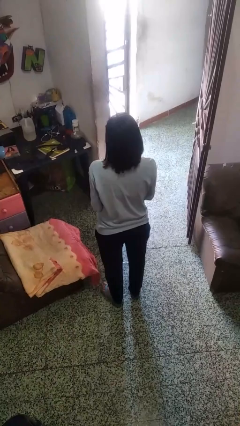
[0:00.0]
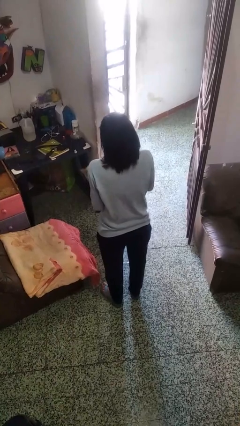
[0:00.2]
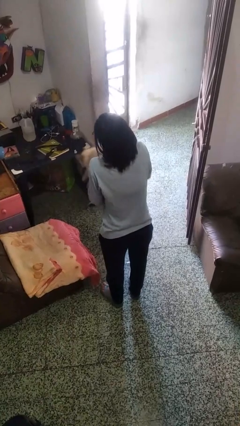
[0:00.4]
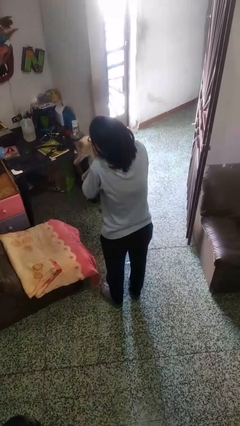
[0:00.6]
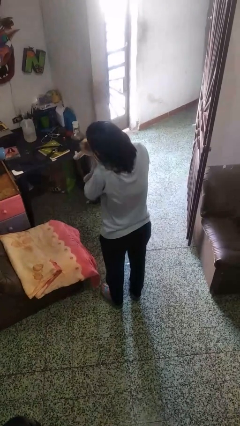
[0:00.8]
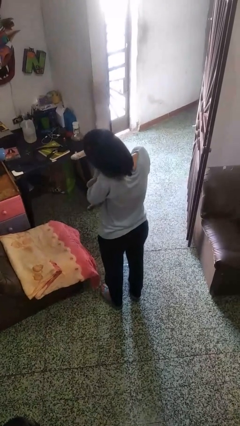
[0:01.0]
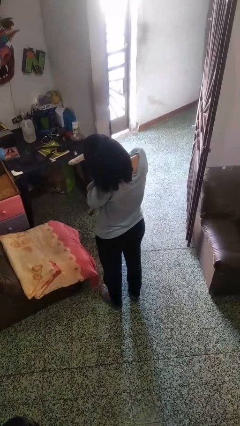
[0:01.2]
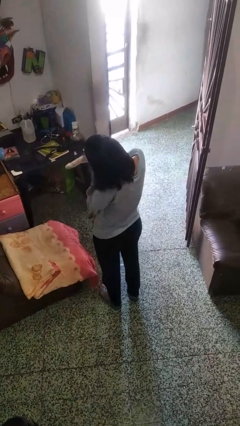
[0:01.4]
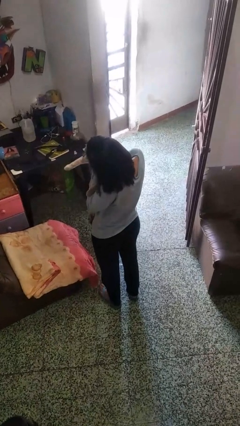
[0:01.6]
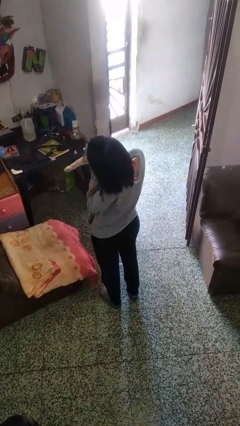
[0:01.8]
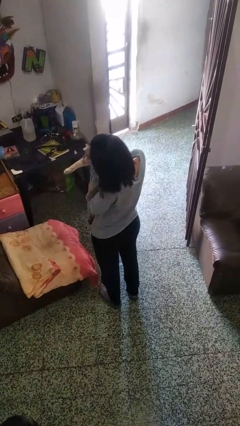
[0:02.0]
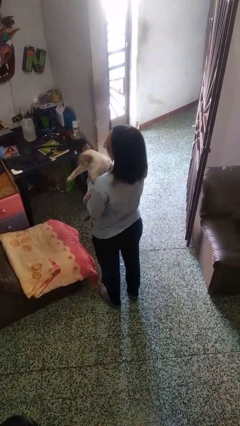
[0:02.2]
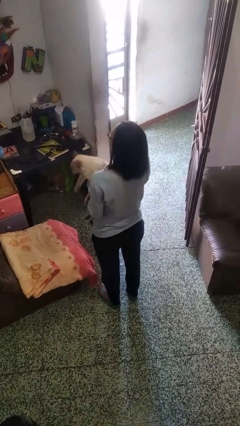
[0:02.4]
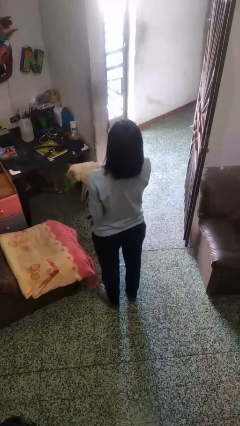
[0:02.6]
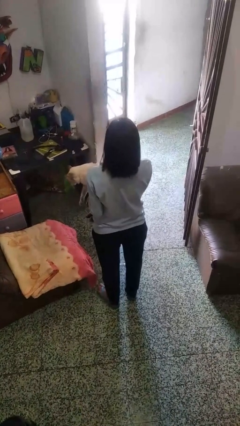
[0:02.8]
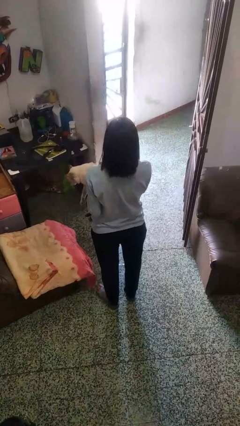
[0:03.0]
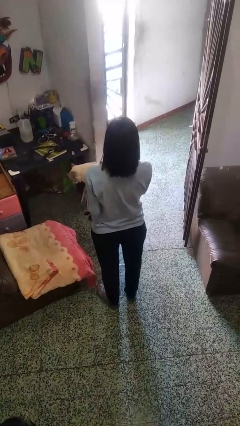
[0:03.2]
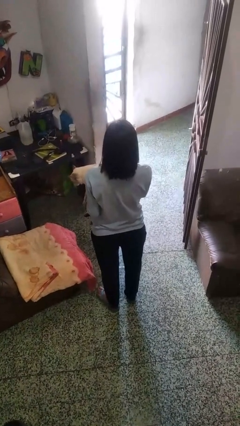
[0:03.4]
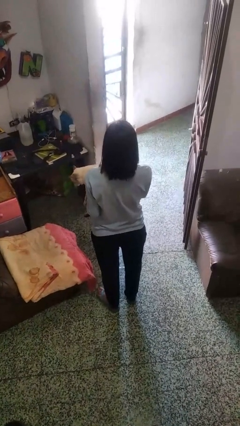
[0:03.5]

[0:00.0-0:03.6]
person hugs cat

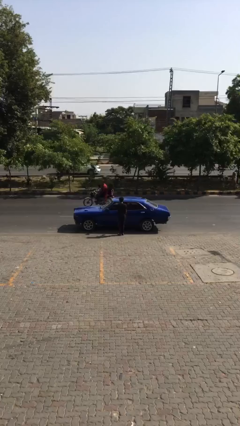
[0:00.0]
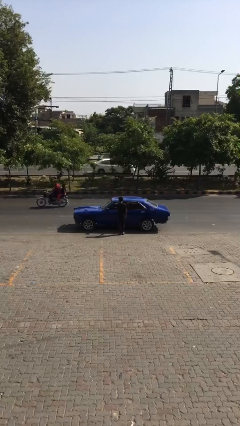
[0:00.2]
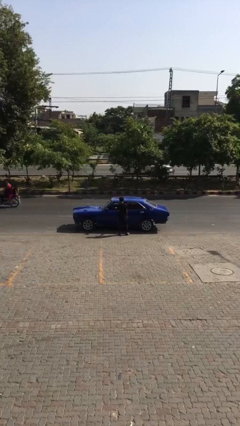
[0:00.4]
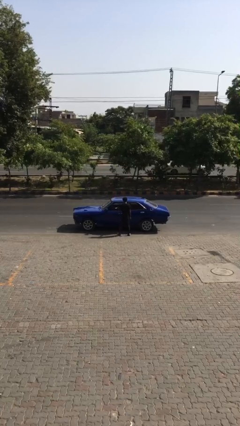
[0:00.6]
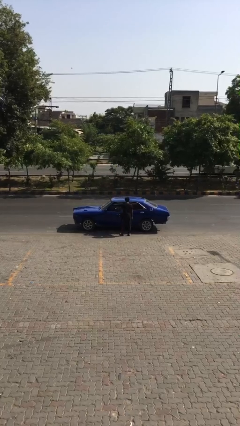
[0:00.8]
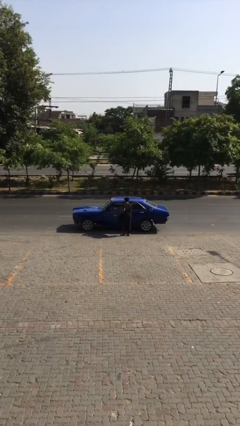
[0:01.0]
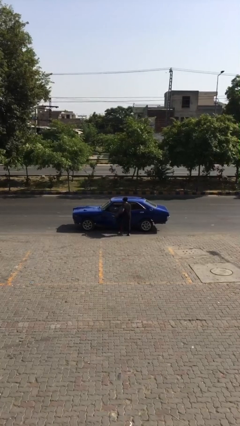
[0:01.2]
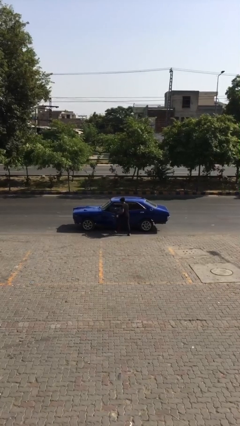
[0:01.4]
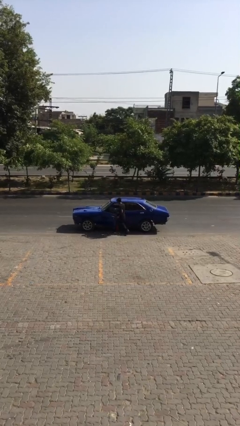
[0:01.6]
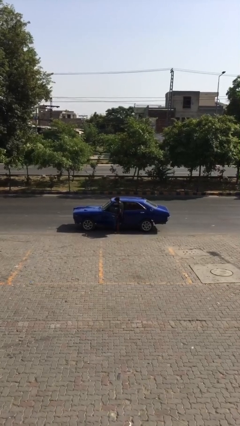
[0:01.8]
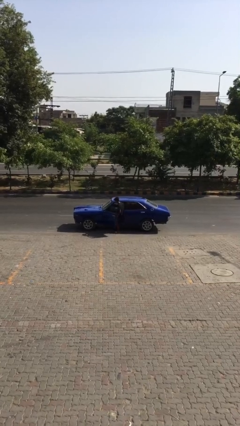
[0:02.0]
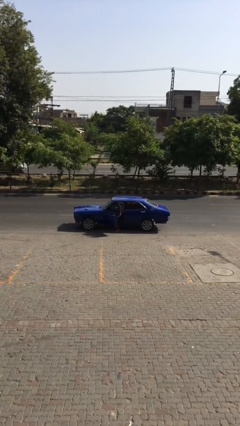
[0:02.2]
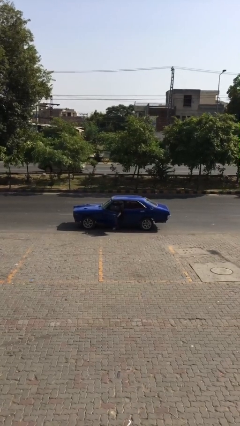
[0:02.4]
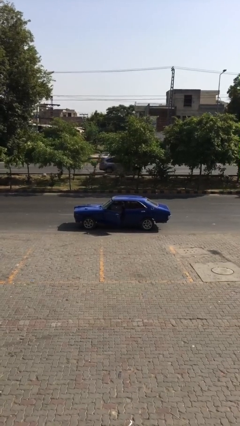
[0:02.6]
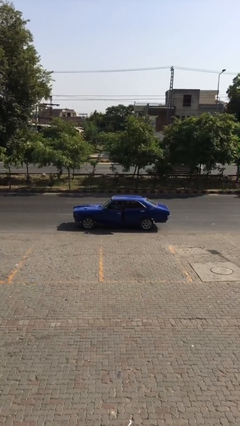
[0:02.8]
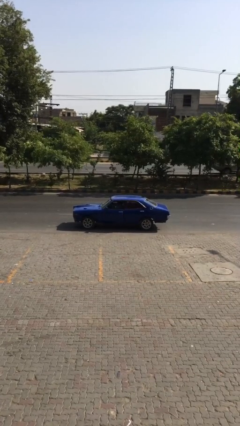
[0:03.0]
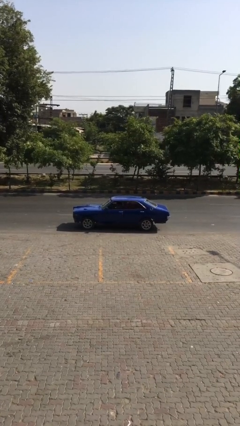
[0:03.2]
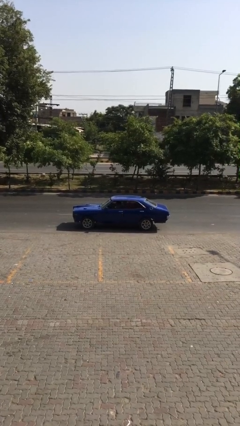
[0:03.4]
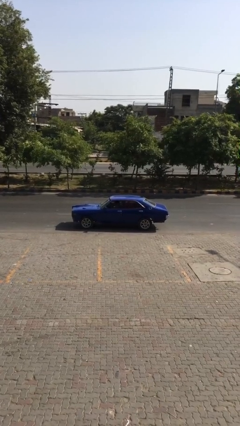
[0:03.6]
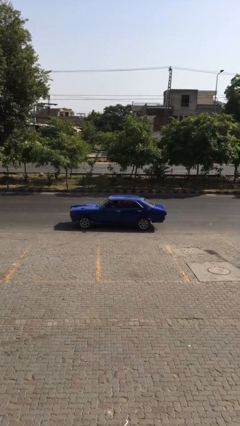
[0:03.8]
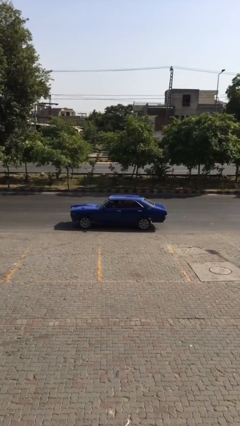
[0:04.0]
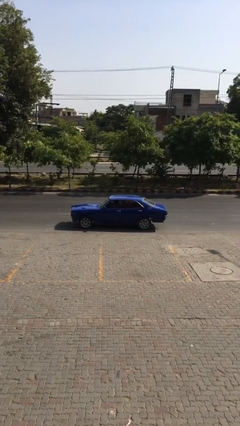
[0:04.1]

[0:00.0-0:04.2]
car picks up person

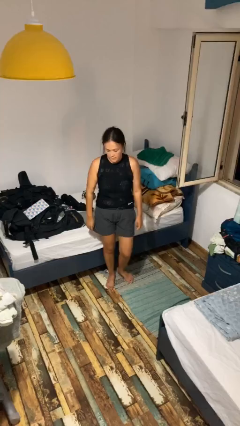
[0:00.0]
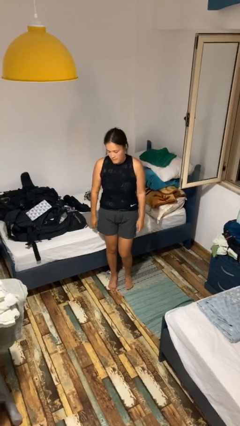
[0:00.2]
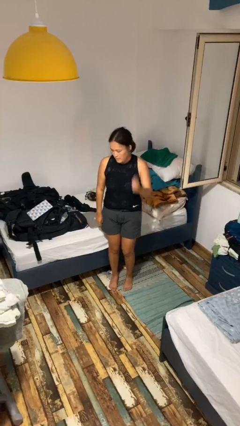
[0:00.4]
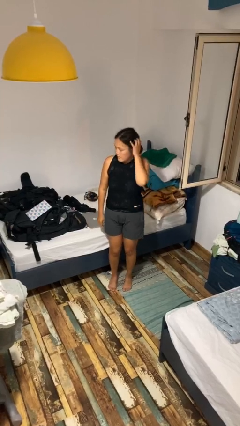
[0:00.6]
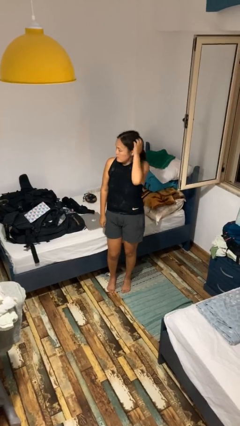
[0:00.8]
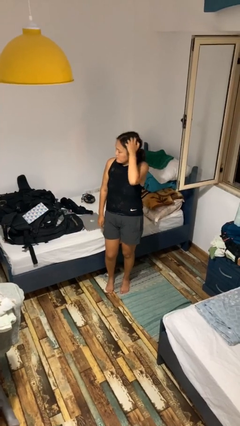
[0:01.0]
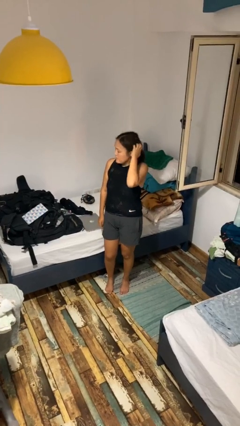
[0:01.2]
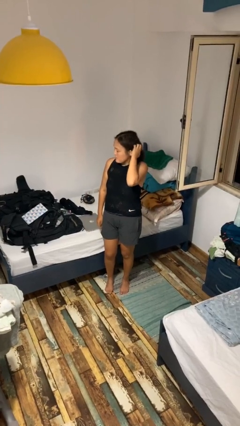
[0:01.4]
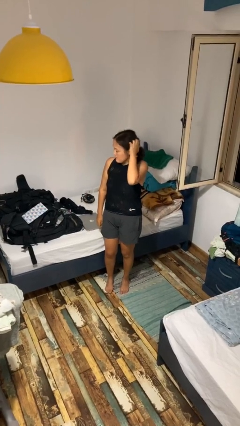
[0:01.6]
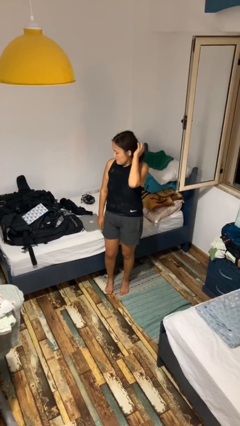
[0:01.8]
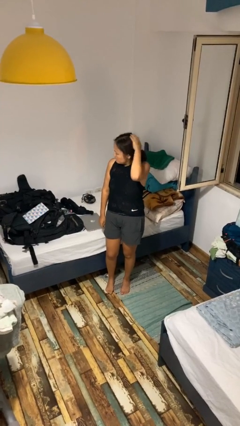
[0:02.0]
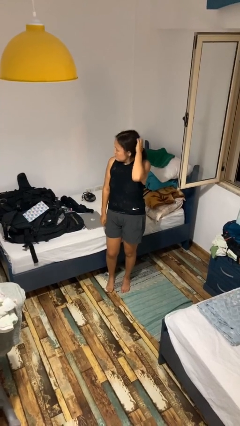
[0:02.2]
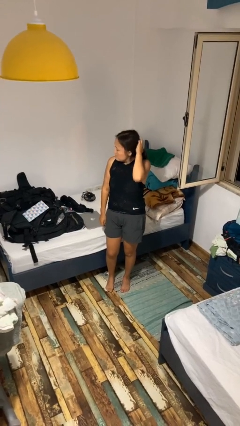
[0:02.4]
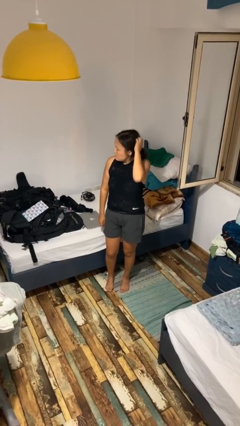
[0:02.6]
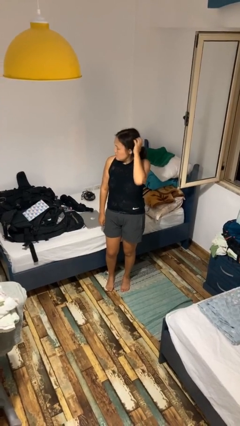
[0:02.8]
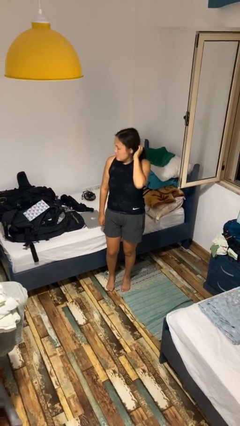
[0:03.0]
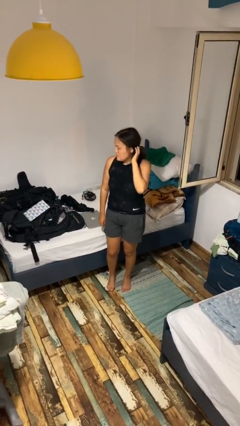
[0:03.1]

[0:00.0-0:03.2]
person scratches face

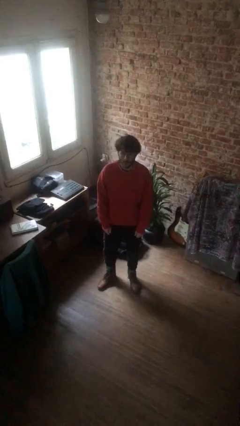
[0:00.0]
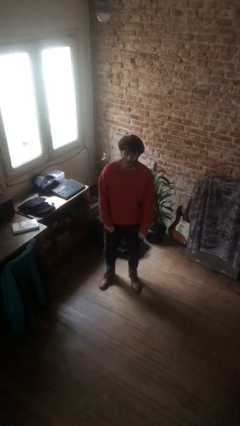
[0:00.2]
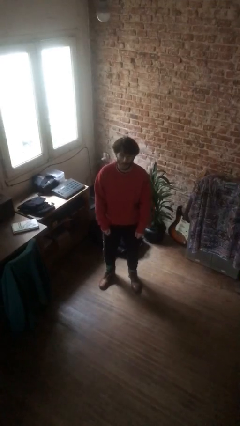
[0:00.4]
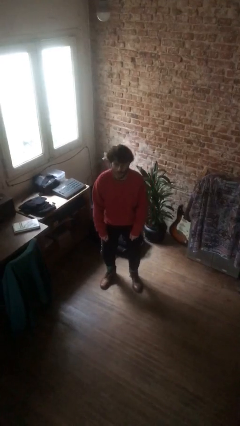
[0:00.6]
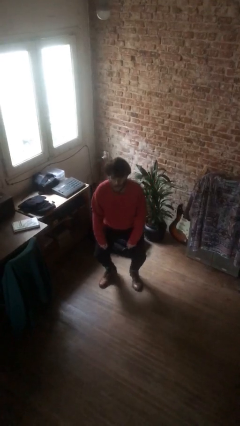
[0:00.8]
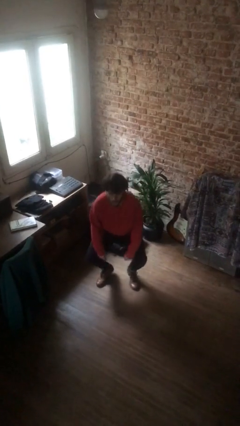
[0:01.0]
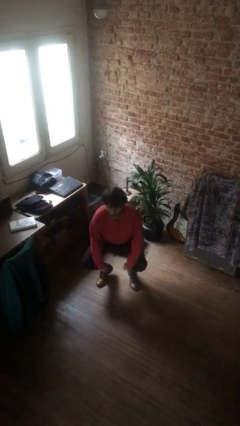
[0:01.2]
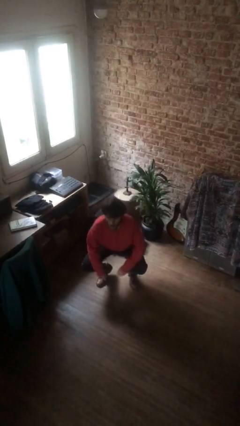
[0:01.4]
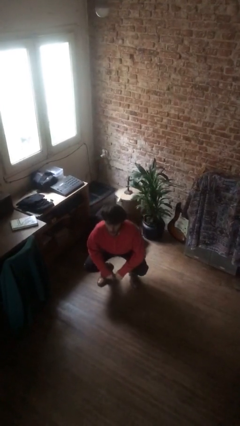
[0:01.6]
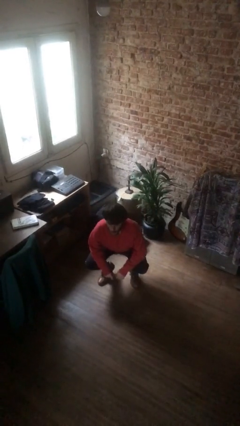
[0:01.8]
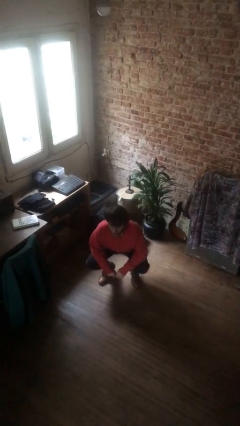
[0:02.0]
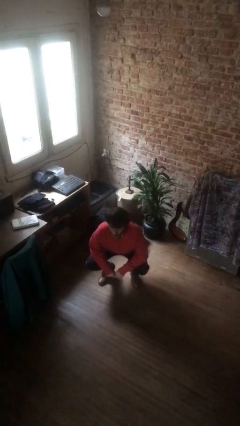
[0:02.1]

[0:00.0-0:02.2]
person squats

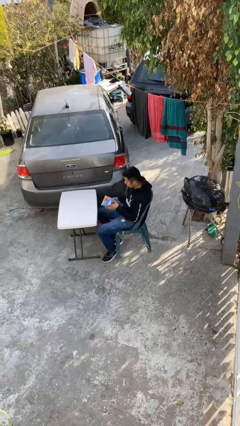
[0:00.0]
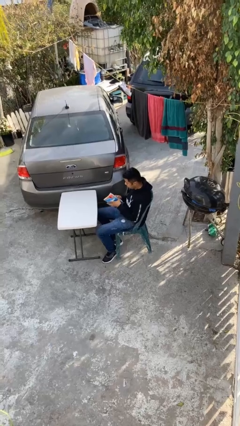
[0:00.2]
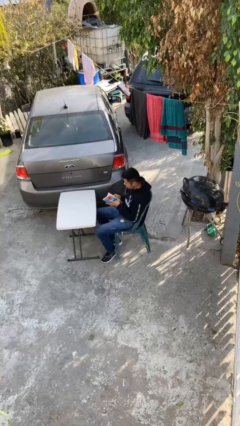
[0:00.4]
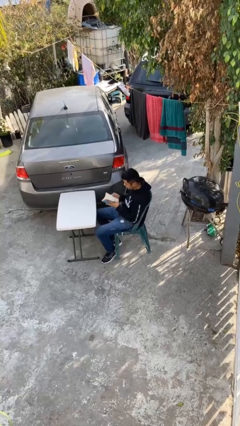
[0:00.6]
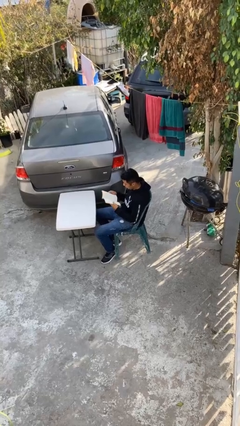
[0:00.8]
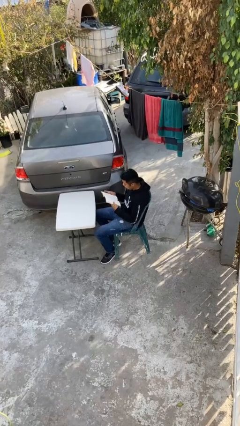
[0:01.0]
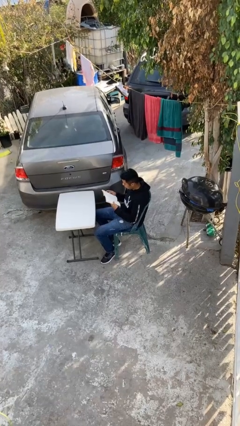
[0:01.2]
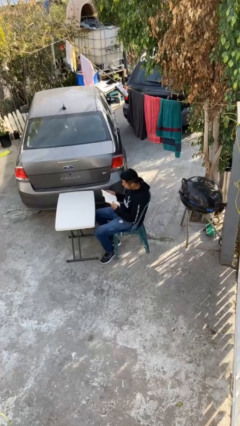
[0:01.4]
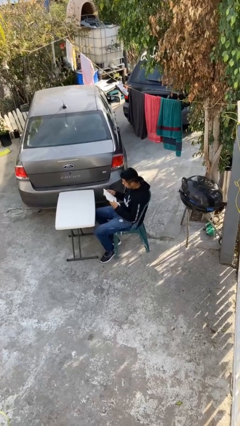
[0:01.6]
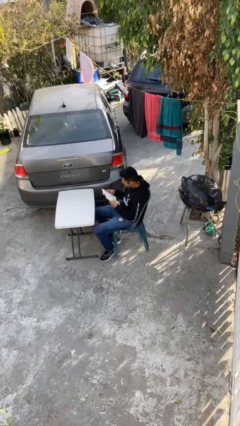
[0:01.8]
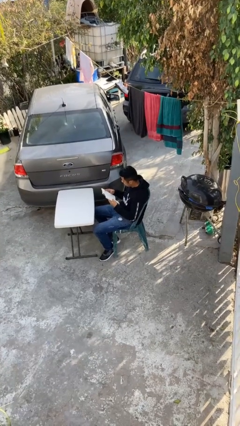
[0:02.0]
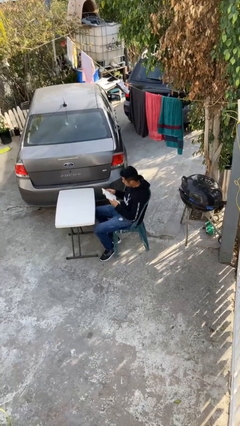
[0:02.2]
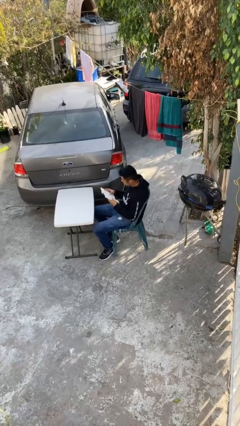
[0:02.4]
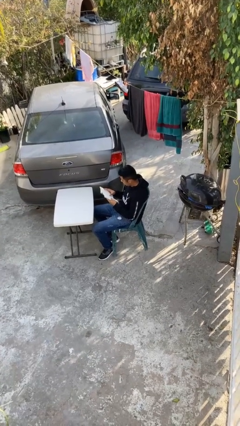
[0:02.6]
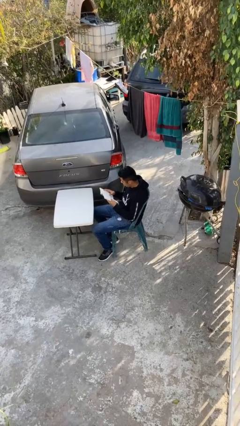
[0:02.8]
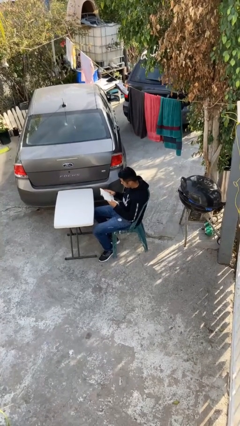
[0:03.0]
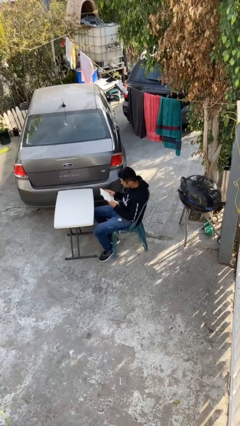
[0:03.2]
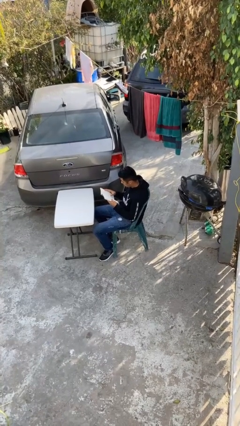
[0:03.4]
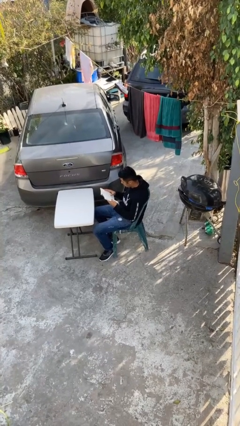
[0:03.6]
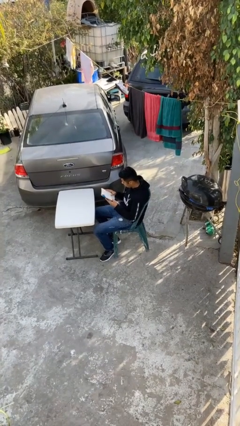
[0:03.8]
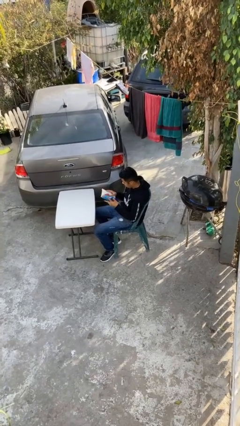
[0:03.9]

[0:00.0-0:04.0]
person reads document
